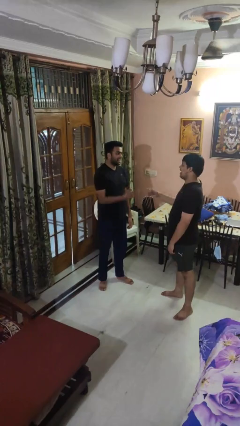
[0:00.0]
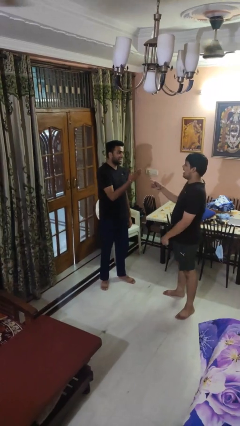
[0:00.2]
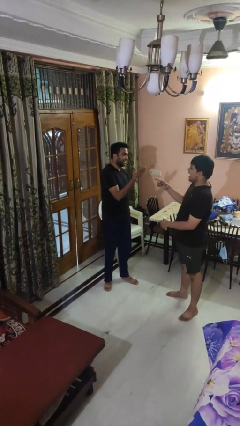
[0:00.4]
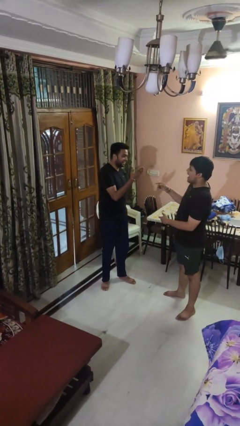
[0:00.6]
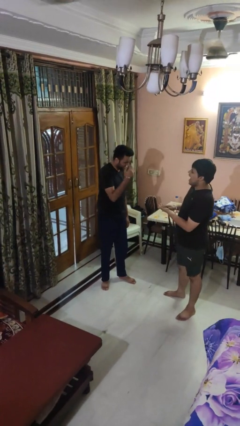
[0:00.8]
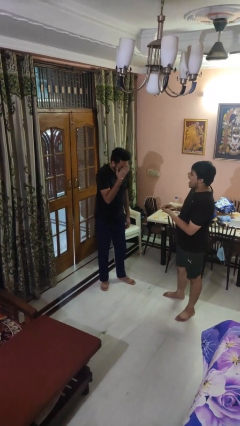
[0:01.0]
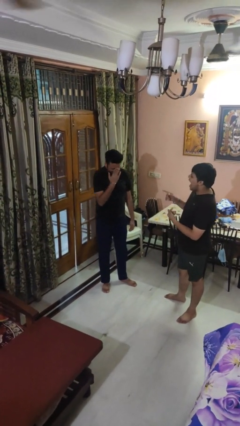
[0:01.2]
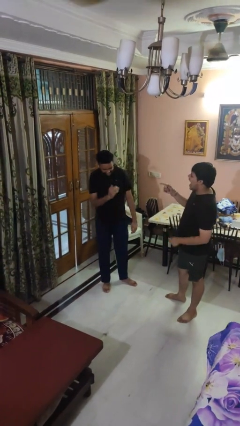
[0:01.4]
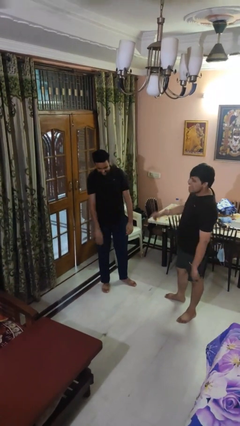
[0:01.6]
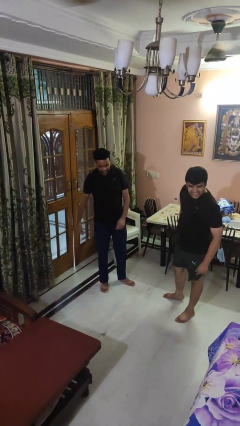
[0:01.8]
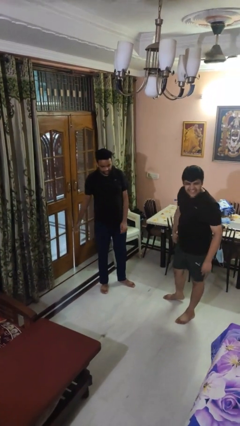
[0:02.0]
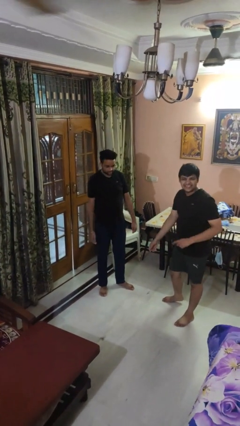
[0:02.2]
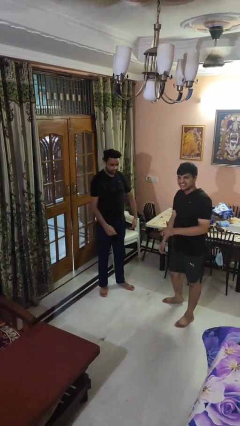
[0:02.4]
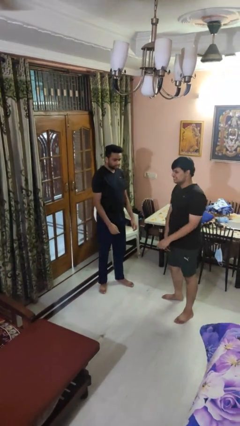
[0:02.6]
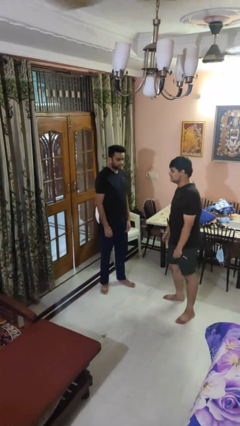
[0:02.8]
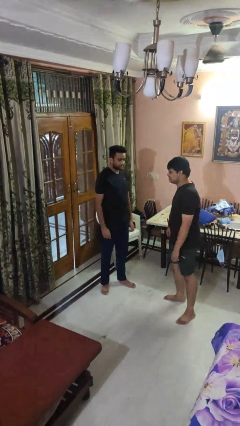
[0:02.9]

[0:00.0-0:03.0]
person laughs with person

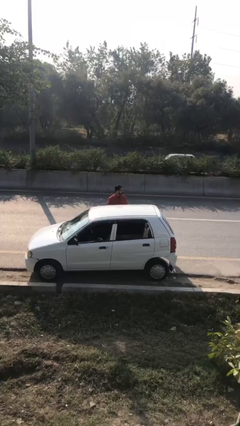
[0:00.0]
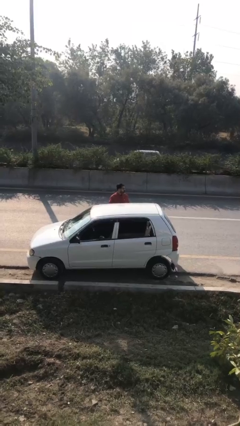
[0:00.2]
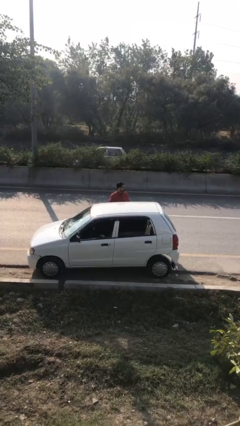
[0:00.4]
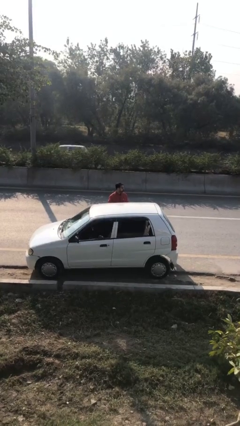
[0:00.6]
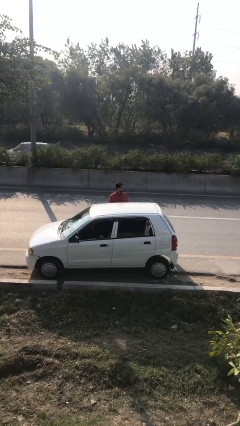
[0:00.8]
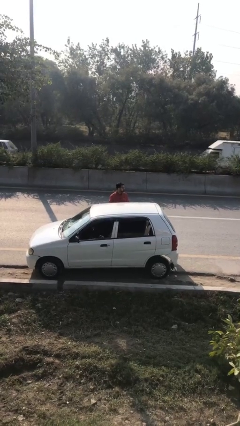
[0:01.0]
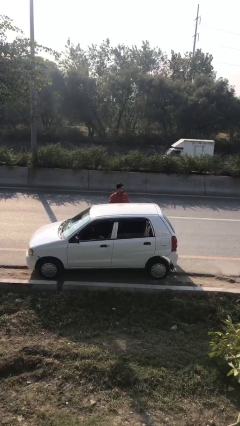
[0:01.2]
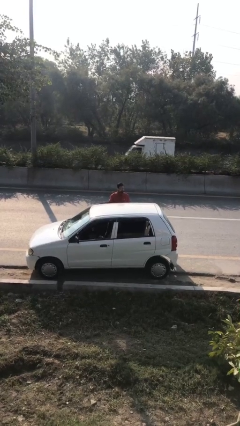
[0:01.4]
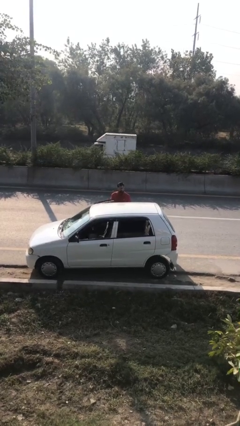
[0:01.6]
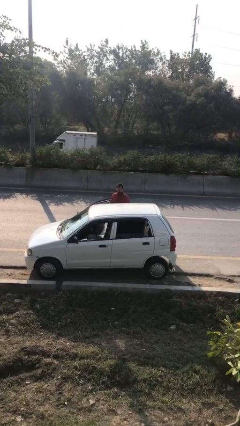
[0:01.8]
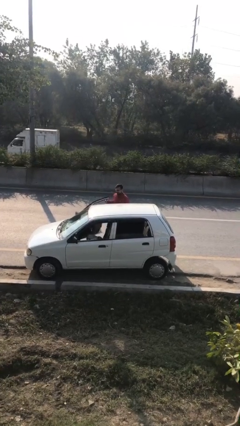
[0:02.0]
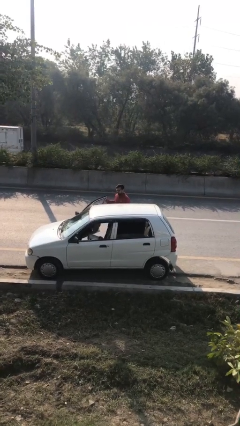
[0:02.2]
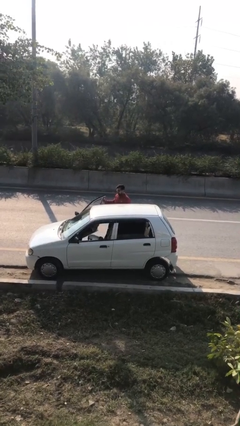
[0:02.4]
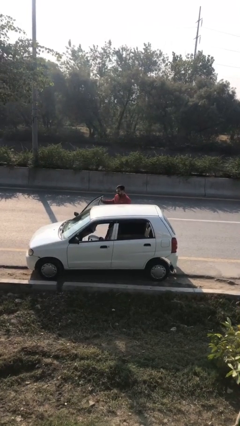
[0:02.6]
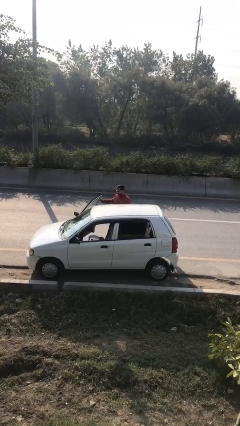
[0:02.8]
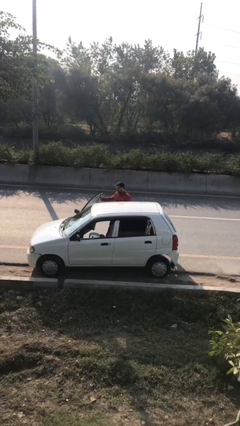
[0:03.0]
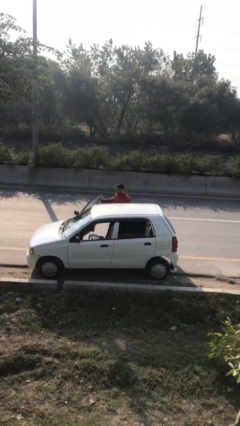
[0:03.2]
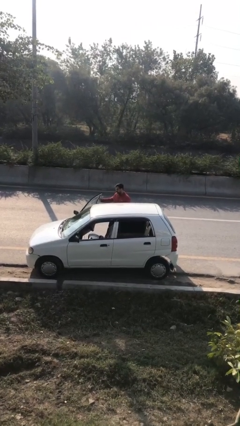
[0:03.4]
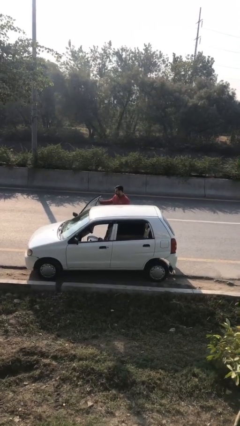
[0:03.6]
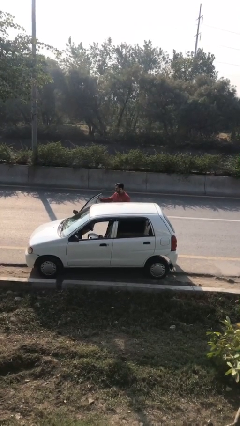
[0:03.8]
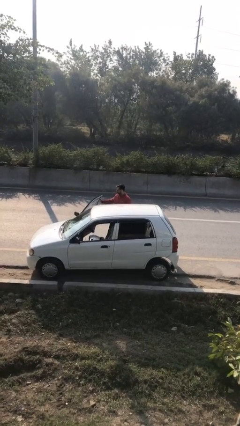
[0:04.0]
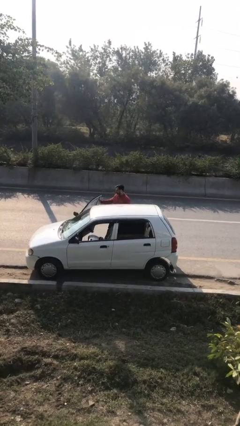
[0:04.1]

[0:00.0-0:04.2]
person opens car door

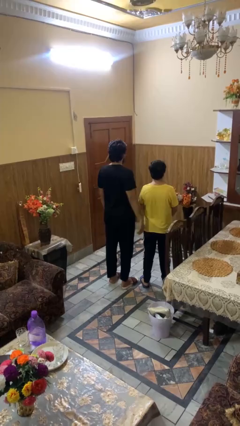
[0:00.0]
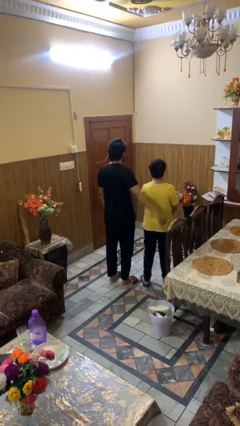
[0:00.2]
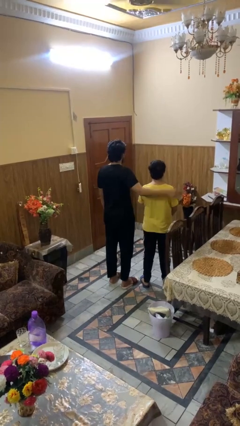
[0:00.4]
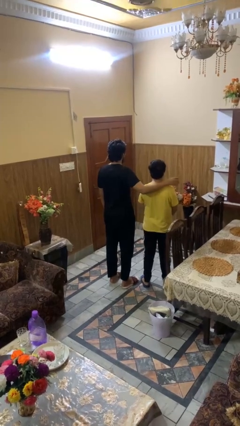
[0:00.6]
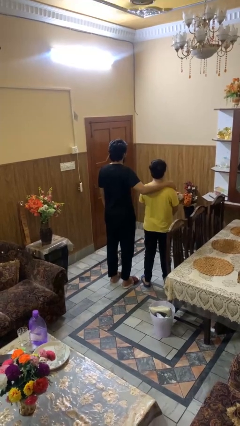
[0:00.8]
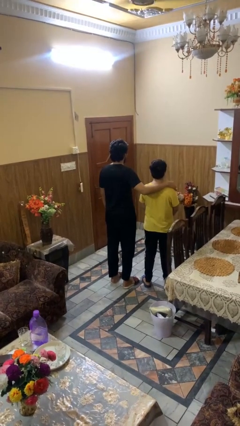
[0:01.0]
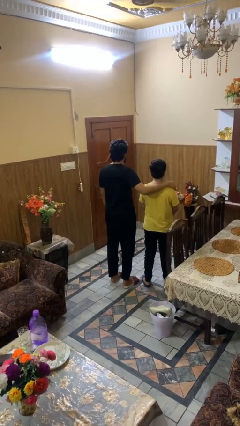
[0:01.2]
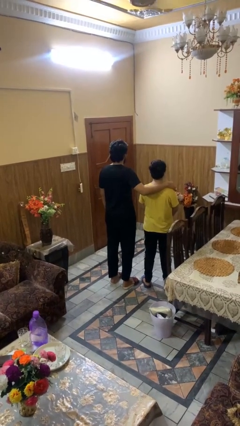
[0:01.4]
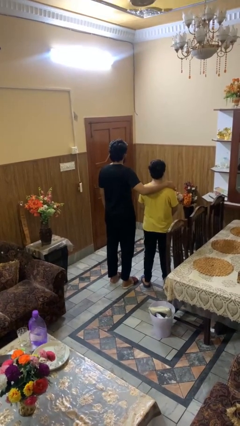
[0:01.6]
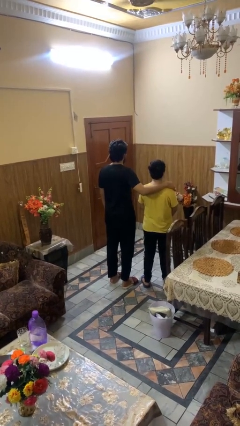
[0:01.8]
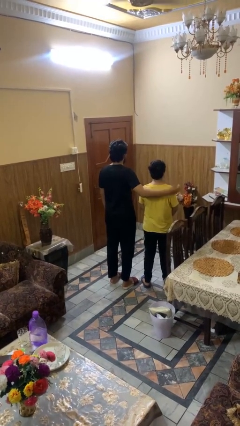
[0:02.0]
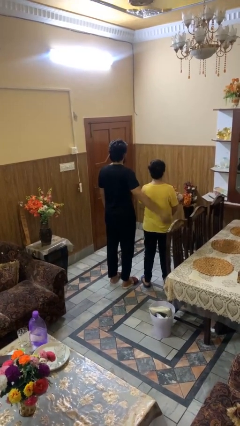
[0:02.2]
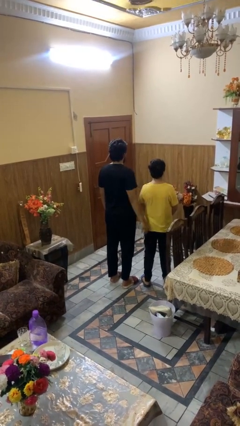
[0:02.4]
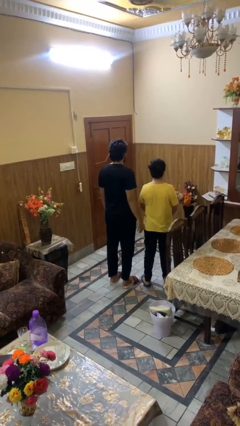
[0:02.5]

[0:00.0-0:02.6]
person pounds shoulders of person

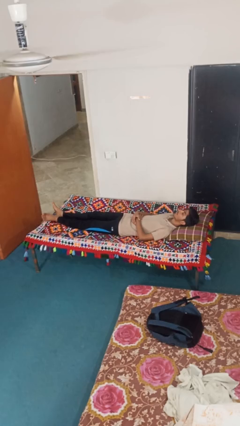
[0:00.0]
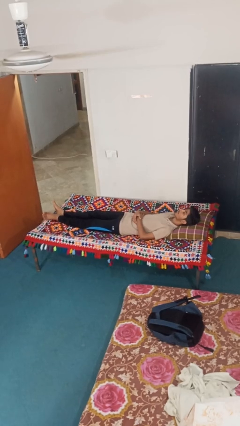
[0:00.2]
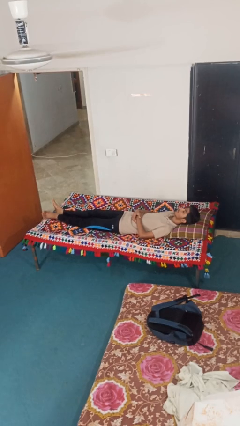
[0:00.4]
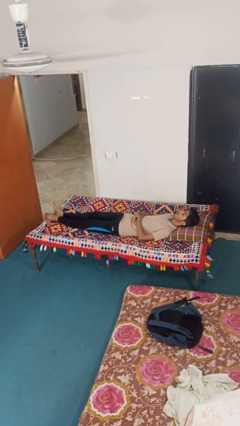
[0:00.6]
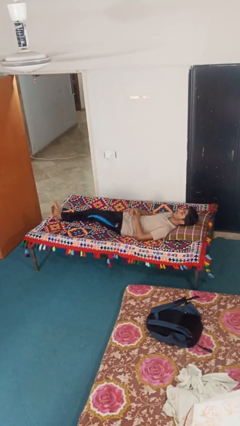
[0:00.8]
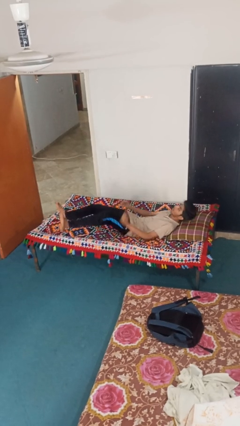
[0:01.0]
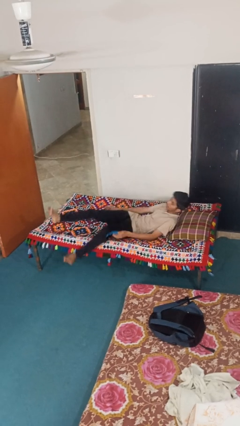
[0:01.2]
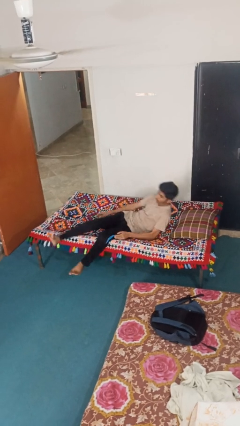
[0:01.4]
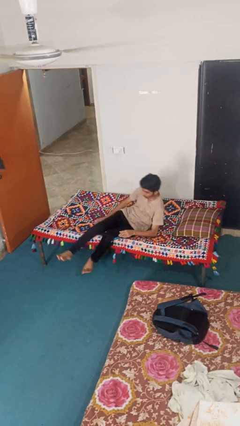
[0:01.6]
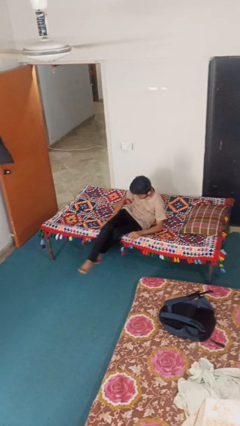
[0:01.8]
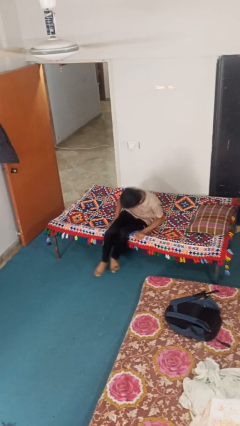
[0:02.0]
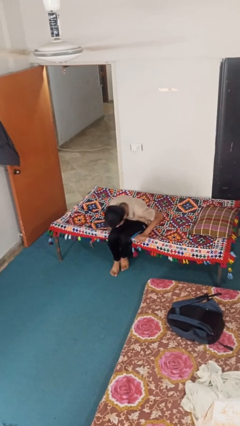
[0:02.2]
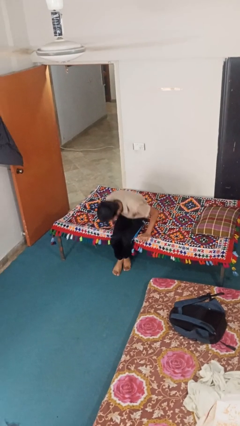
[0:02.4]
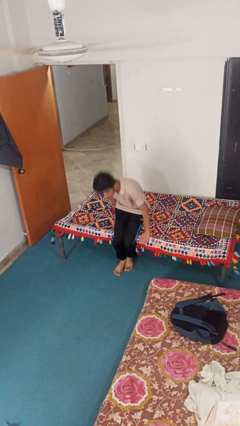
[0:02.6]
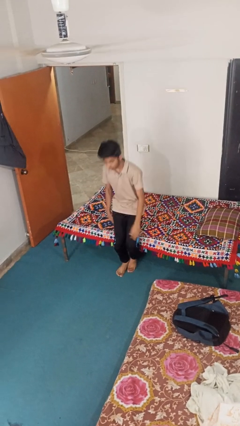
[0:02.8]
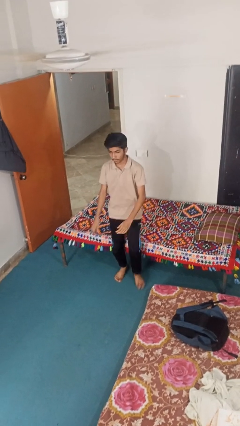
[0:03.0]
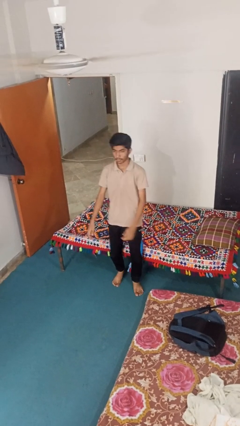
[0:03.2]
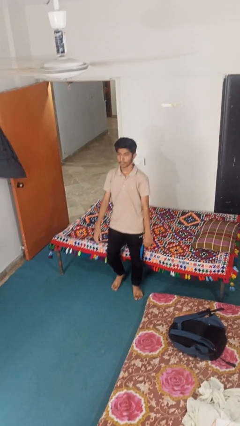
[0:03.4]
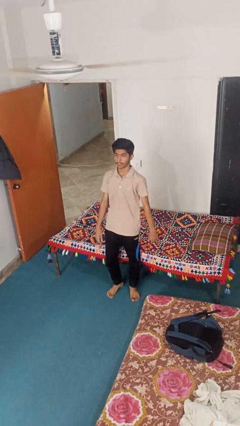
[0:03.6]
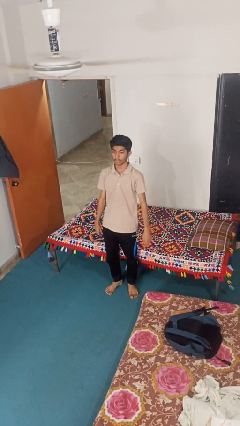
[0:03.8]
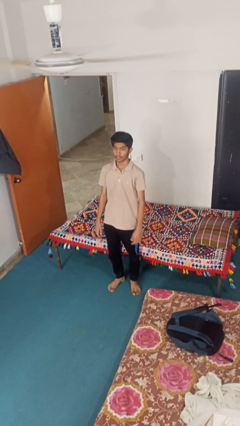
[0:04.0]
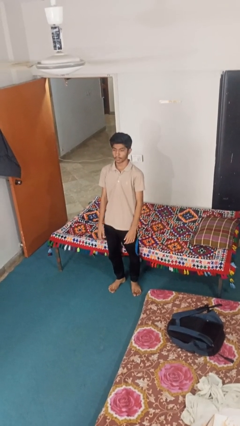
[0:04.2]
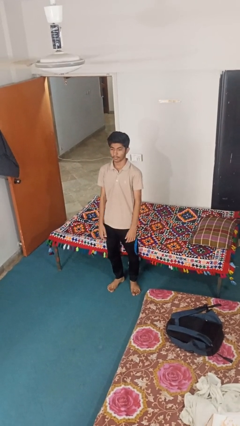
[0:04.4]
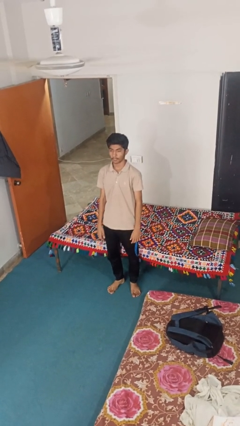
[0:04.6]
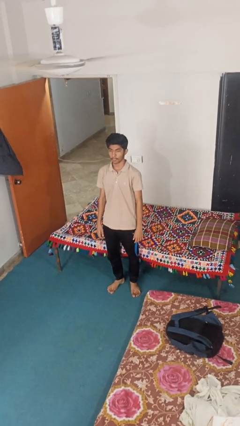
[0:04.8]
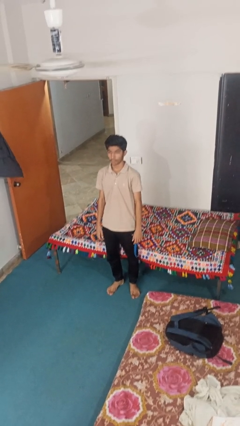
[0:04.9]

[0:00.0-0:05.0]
person stands up

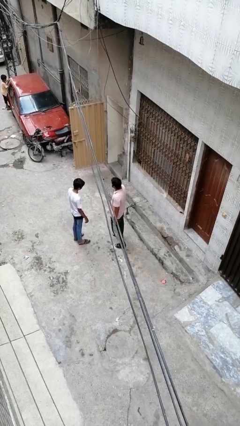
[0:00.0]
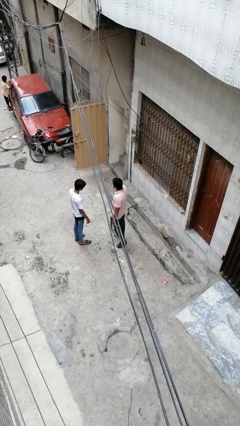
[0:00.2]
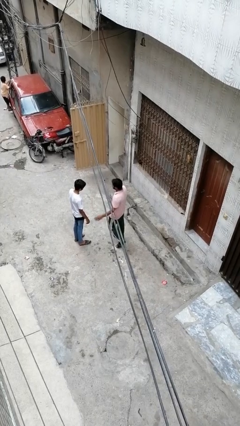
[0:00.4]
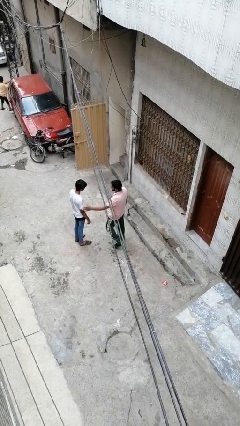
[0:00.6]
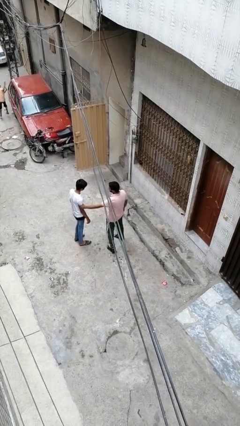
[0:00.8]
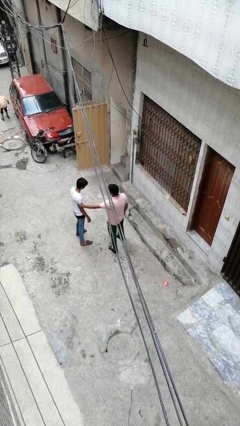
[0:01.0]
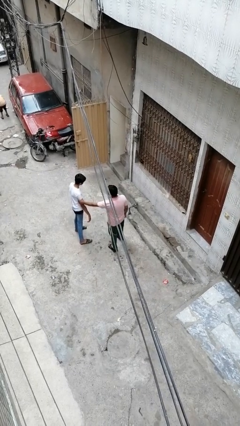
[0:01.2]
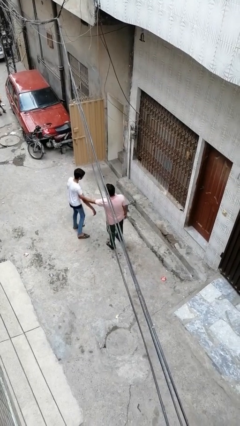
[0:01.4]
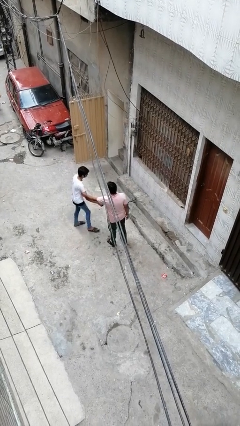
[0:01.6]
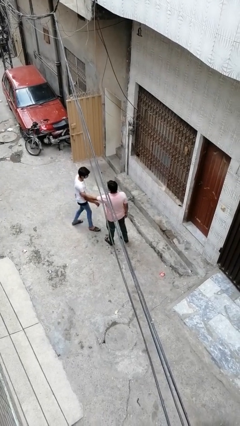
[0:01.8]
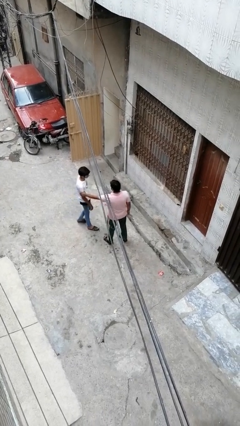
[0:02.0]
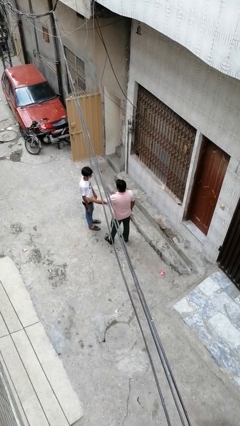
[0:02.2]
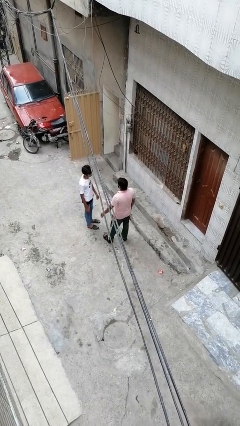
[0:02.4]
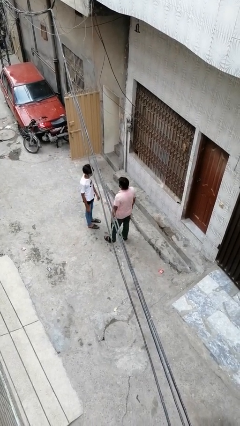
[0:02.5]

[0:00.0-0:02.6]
person grabs person by bicep
